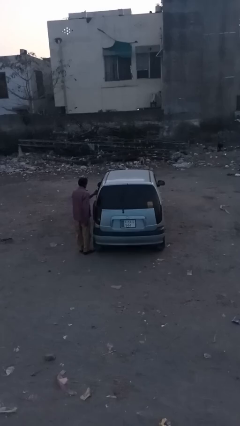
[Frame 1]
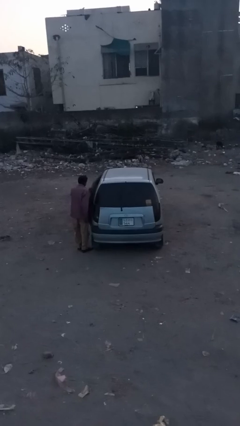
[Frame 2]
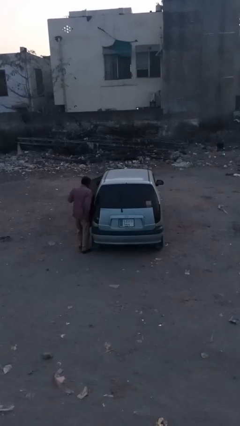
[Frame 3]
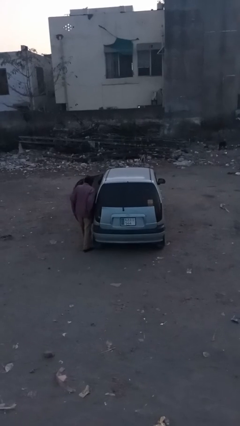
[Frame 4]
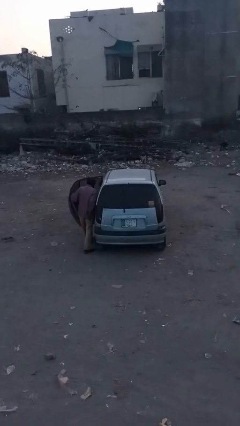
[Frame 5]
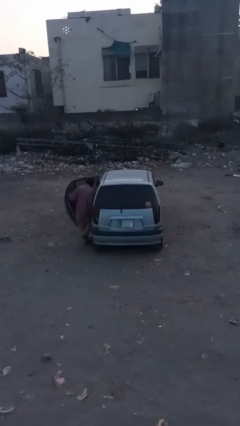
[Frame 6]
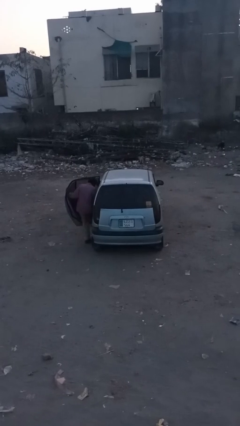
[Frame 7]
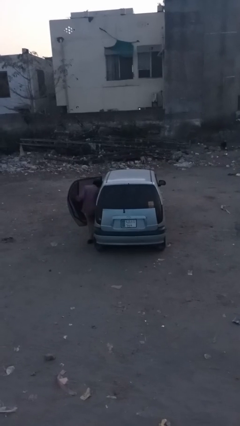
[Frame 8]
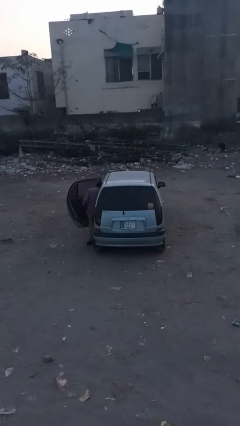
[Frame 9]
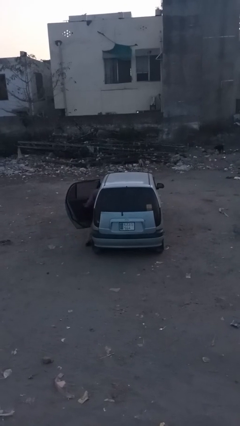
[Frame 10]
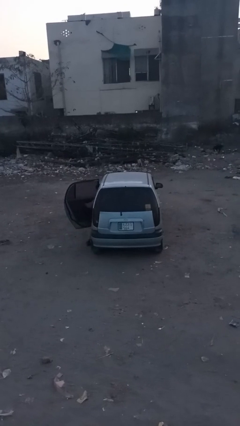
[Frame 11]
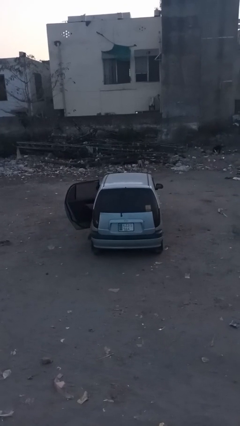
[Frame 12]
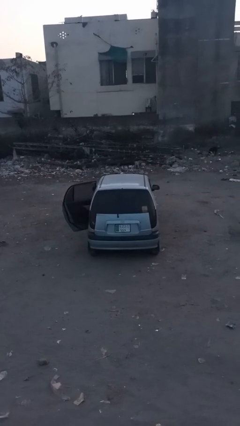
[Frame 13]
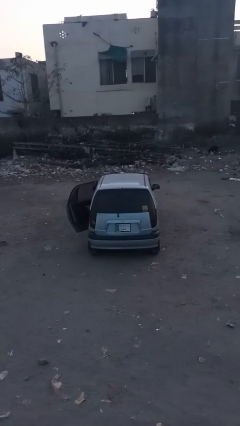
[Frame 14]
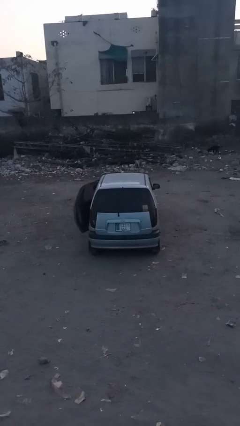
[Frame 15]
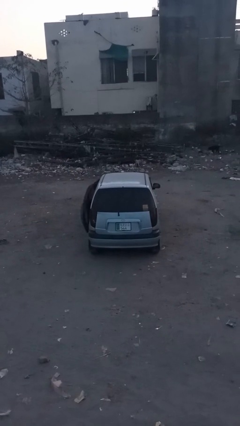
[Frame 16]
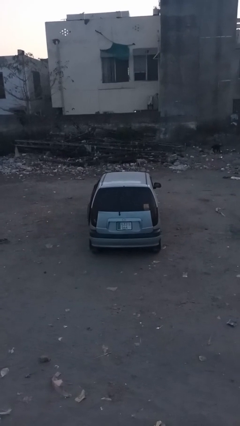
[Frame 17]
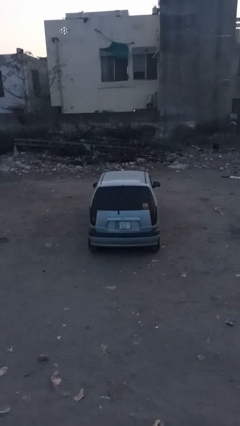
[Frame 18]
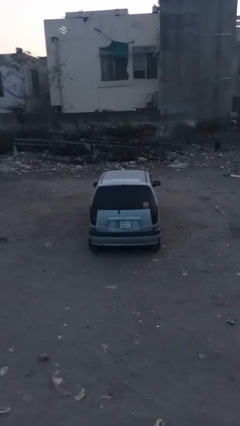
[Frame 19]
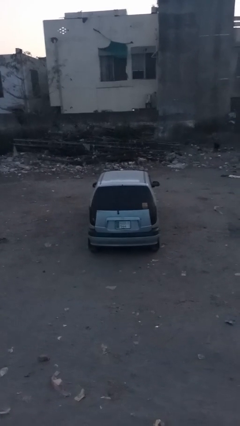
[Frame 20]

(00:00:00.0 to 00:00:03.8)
car picks up person

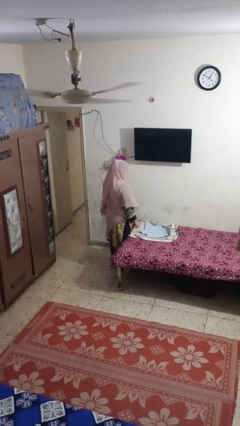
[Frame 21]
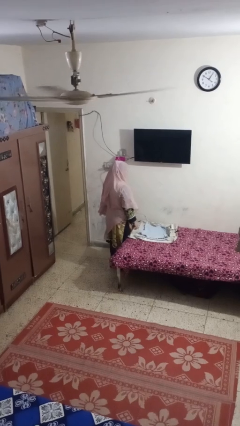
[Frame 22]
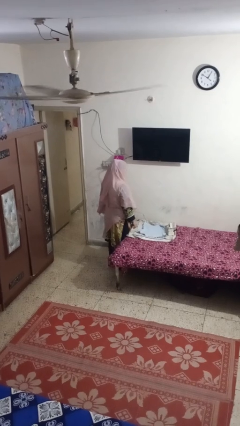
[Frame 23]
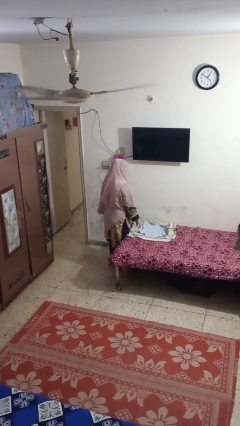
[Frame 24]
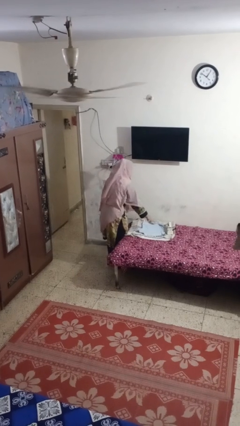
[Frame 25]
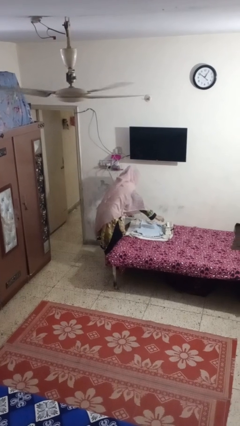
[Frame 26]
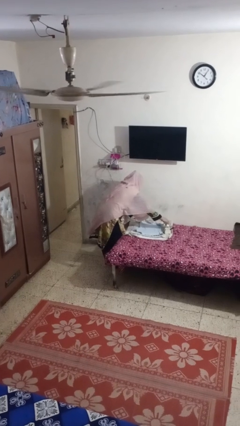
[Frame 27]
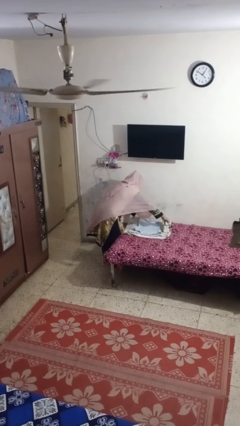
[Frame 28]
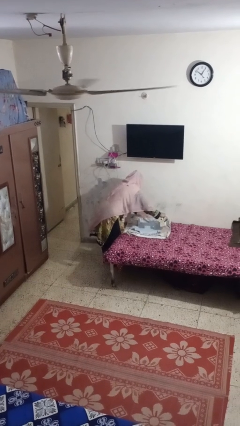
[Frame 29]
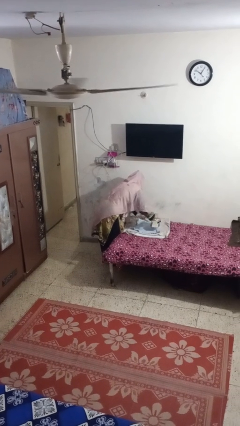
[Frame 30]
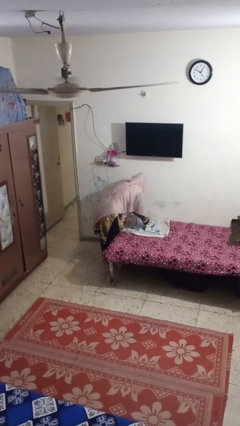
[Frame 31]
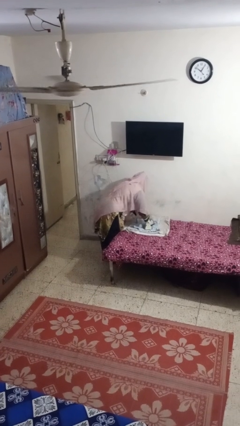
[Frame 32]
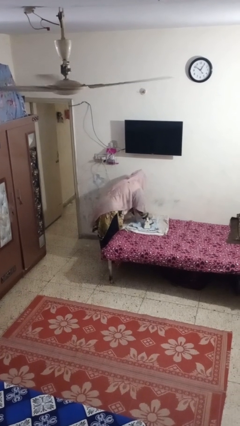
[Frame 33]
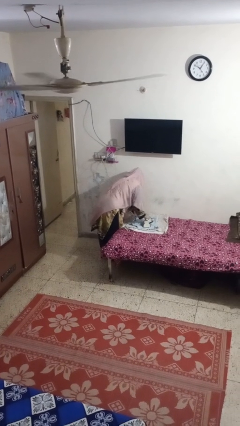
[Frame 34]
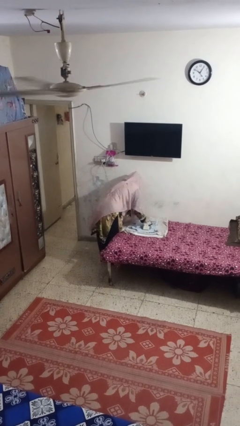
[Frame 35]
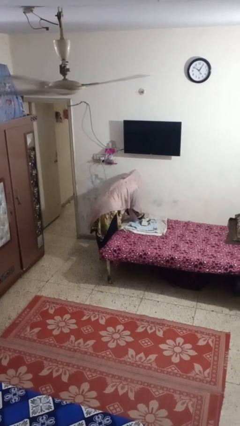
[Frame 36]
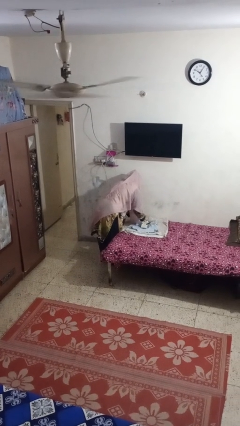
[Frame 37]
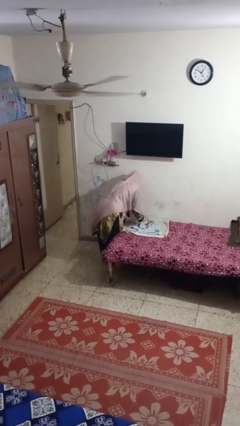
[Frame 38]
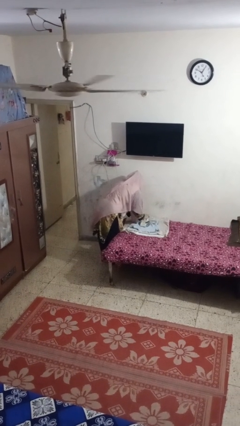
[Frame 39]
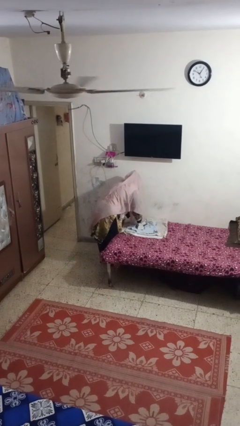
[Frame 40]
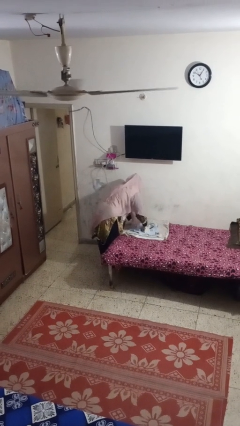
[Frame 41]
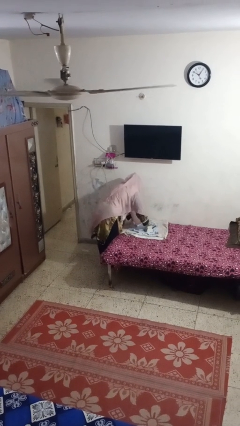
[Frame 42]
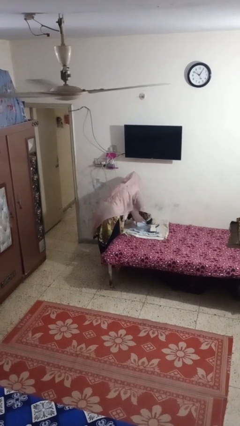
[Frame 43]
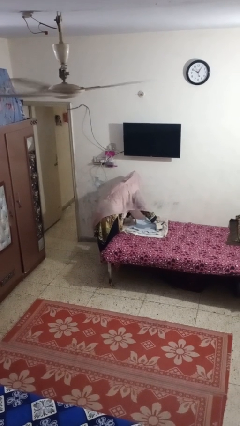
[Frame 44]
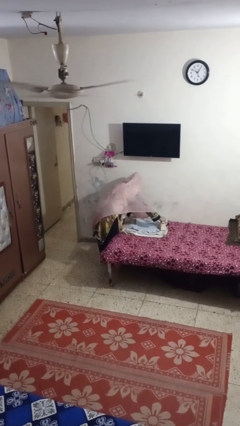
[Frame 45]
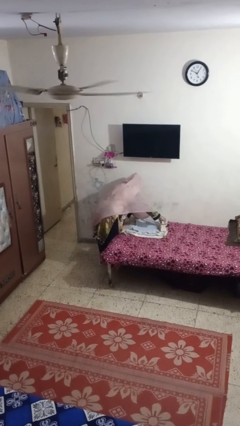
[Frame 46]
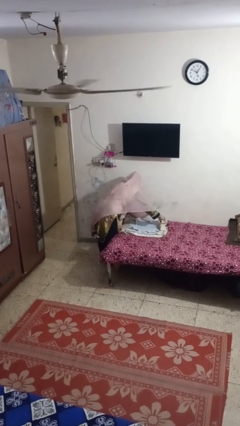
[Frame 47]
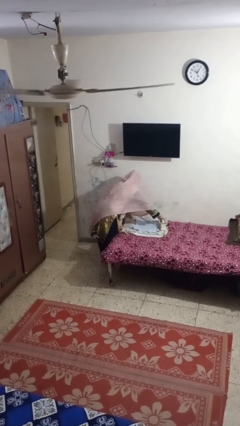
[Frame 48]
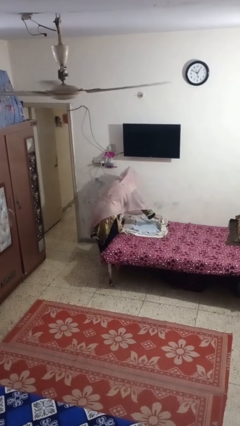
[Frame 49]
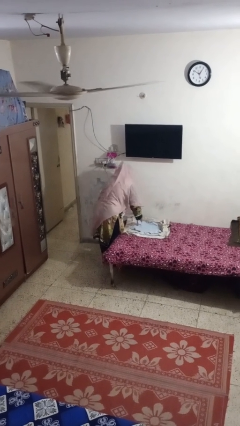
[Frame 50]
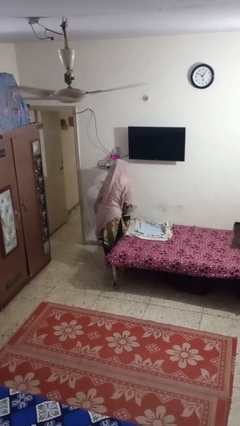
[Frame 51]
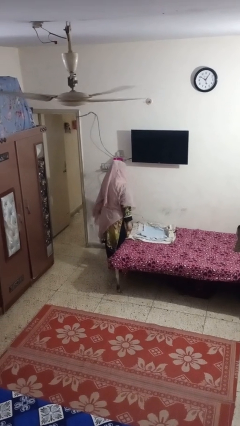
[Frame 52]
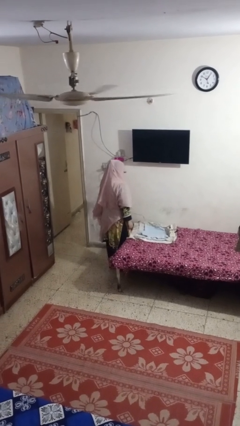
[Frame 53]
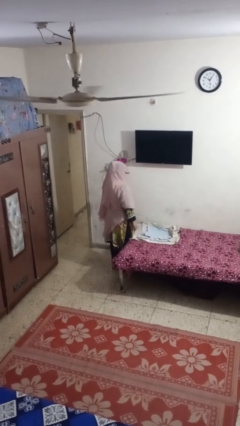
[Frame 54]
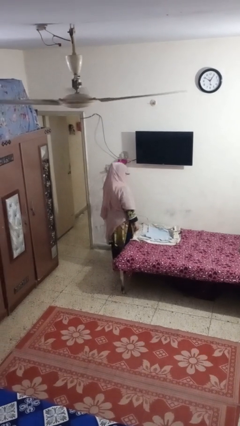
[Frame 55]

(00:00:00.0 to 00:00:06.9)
person irons clothes

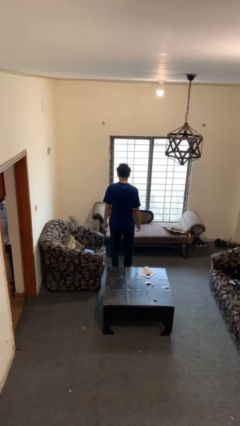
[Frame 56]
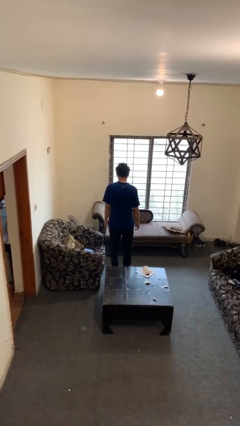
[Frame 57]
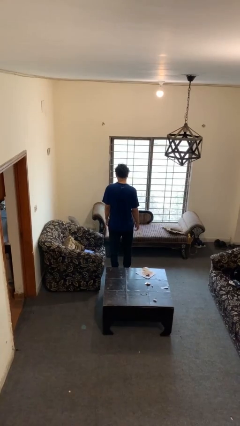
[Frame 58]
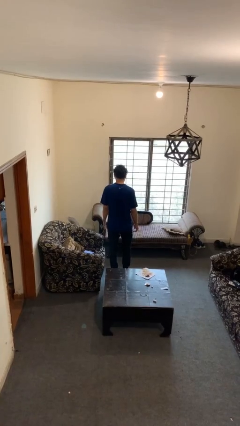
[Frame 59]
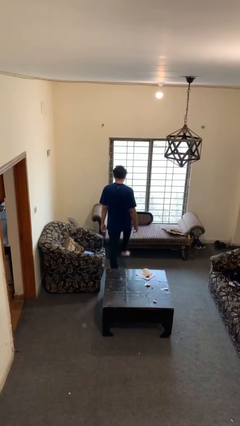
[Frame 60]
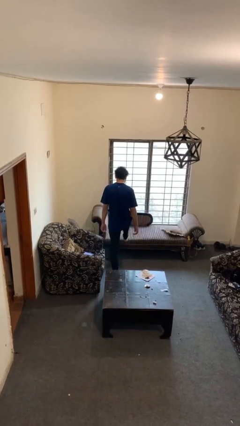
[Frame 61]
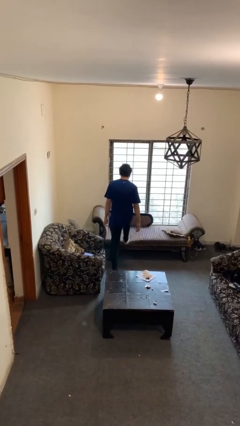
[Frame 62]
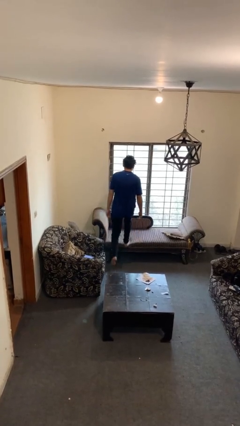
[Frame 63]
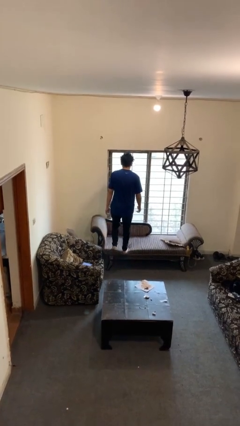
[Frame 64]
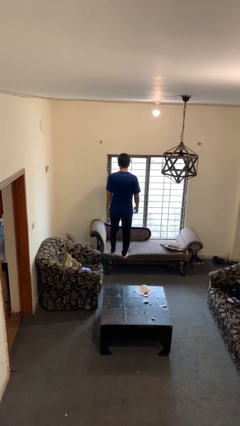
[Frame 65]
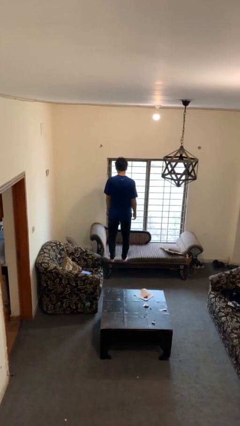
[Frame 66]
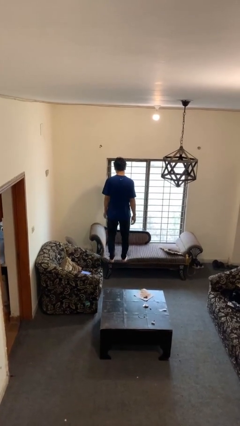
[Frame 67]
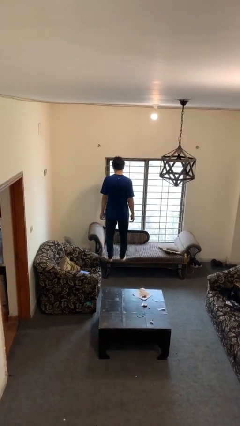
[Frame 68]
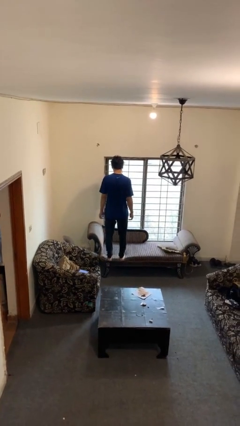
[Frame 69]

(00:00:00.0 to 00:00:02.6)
person climbs on couch

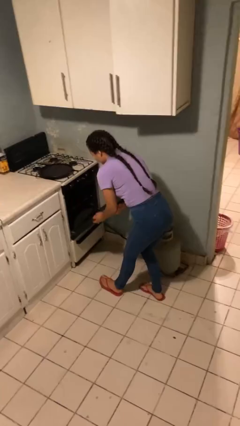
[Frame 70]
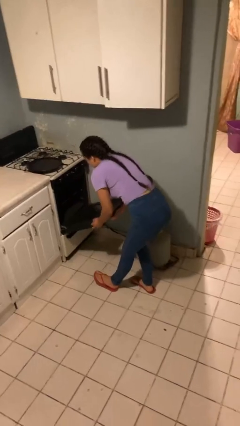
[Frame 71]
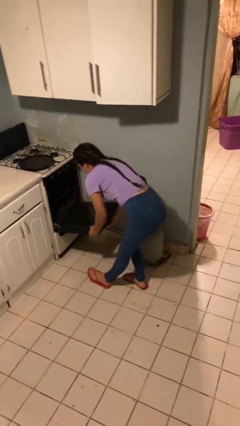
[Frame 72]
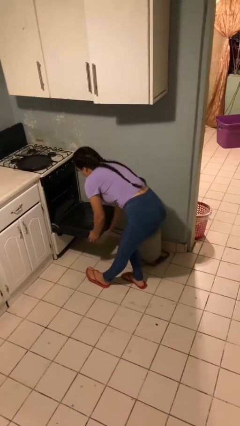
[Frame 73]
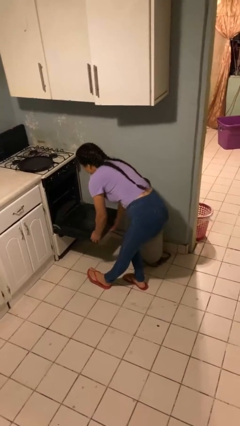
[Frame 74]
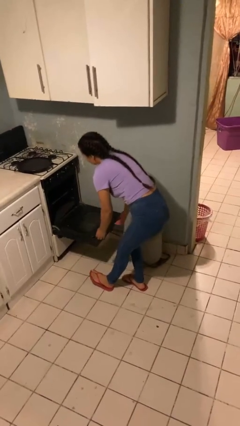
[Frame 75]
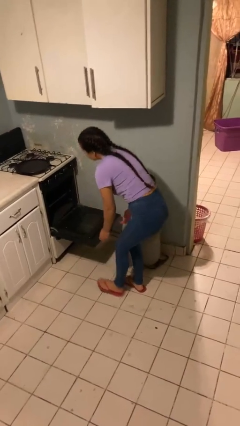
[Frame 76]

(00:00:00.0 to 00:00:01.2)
person opens oven door

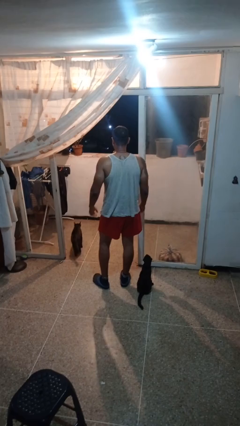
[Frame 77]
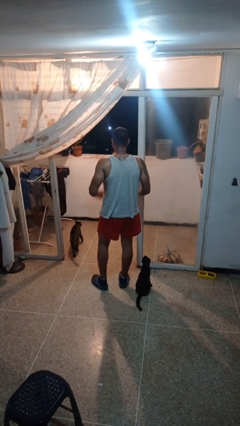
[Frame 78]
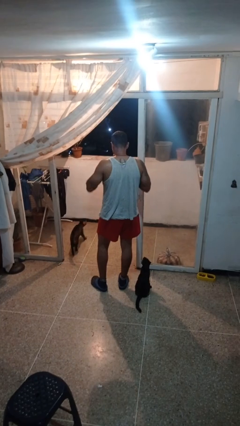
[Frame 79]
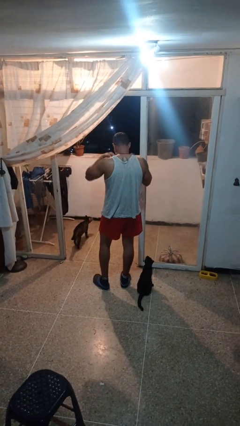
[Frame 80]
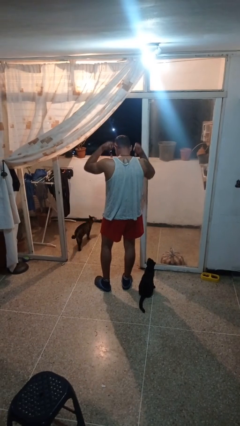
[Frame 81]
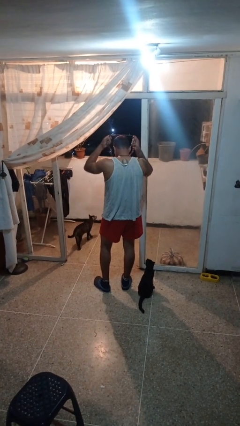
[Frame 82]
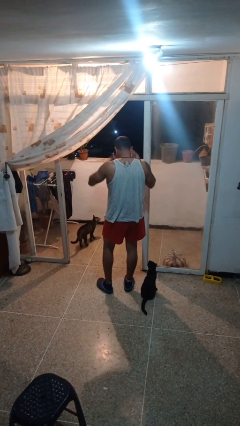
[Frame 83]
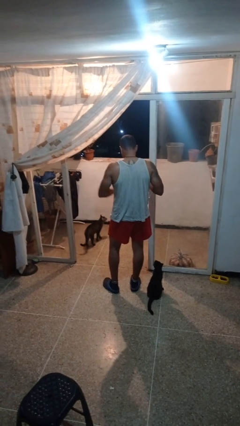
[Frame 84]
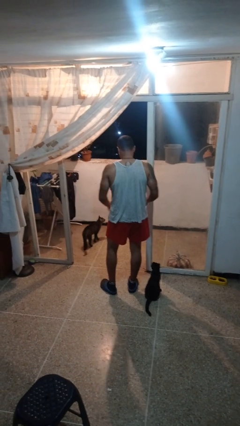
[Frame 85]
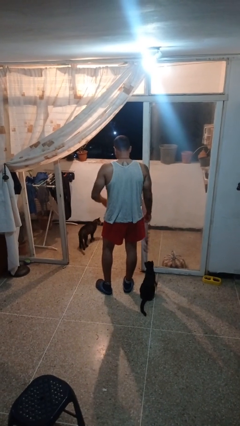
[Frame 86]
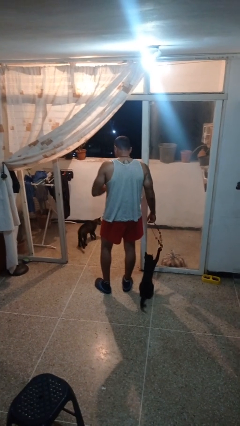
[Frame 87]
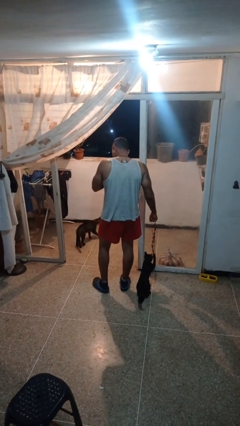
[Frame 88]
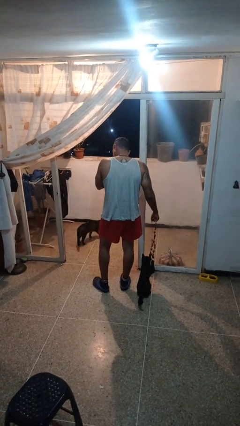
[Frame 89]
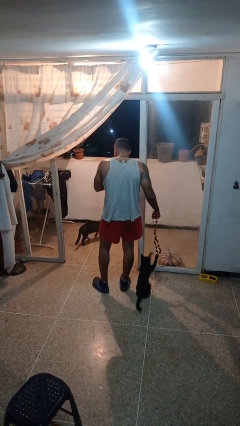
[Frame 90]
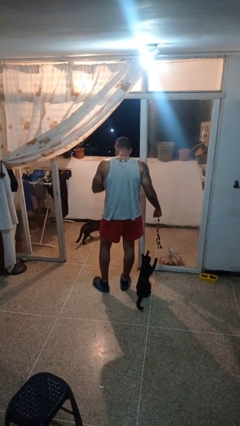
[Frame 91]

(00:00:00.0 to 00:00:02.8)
person takes off necklace

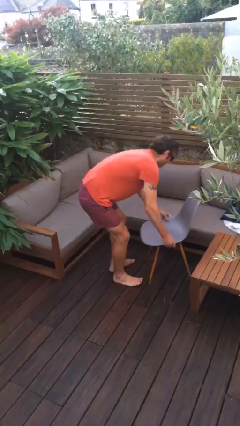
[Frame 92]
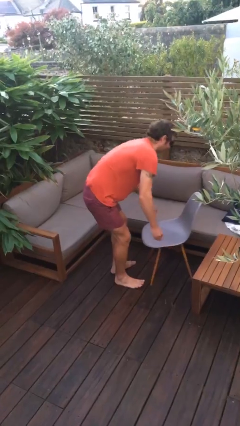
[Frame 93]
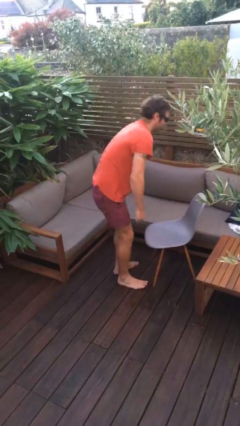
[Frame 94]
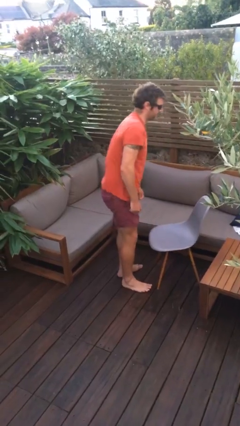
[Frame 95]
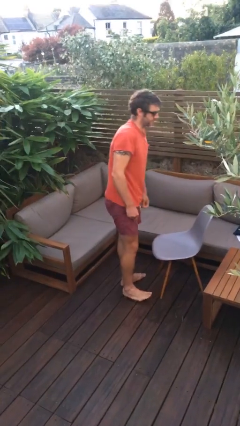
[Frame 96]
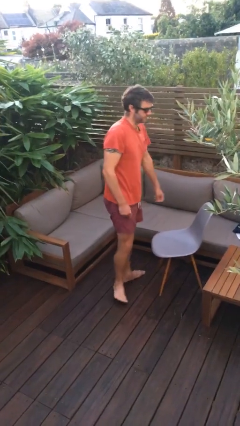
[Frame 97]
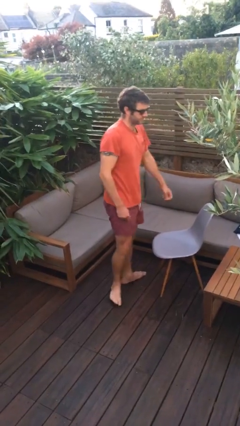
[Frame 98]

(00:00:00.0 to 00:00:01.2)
person puts down object on floor
